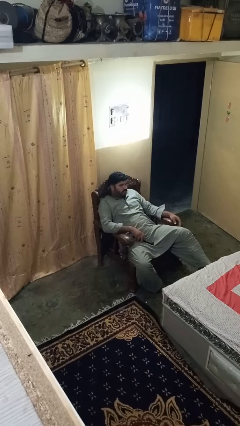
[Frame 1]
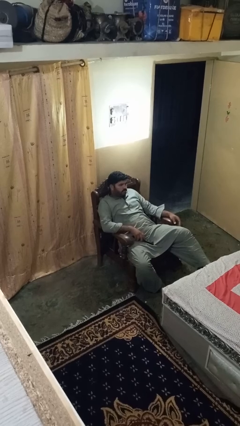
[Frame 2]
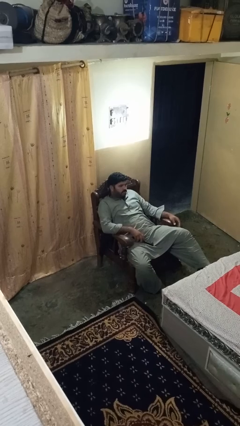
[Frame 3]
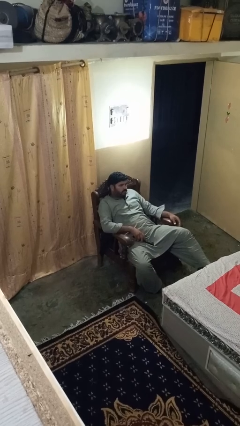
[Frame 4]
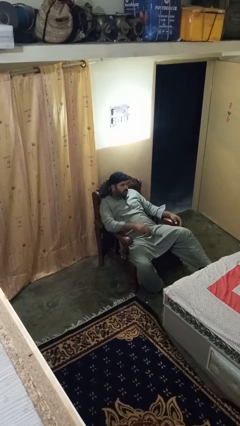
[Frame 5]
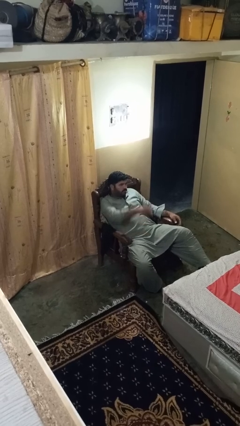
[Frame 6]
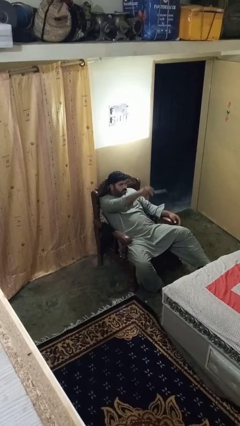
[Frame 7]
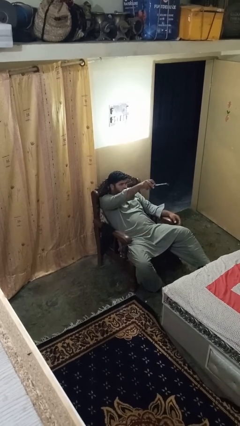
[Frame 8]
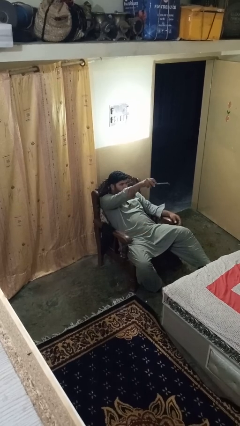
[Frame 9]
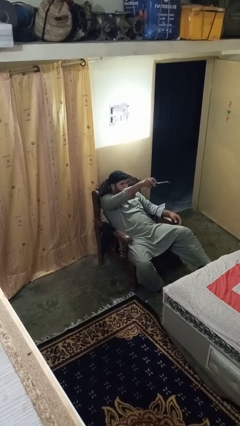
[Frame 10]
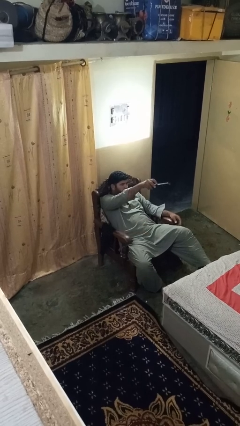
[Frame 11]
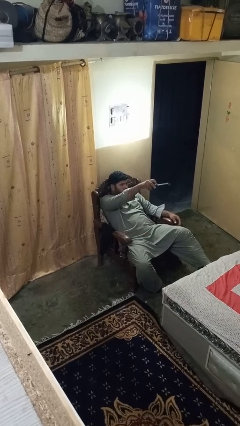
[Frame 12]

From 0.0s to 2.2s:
person uses television remote

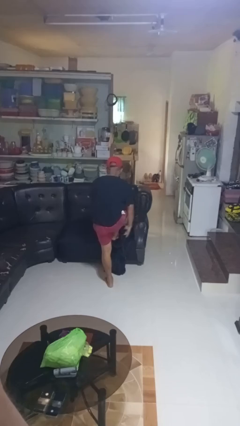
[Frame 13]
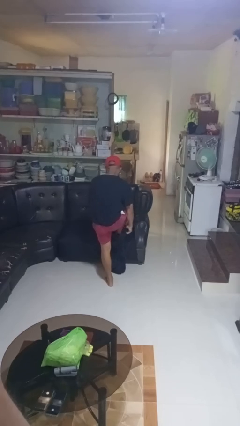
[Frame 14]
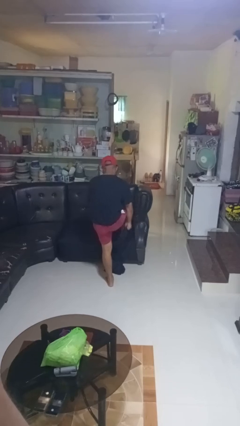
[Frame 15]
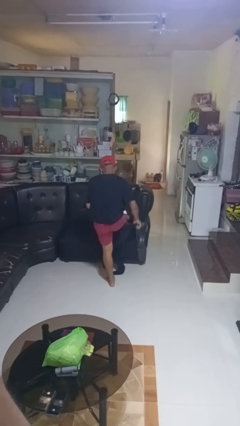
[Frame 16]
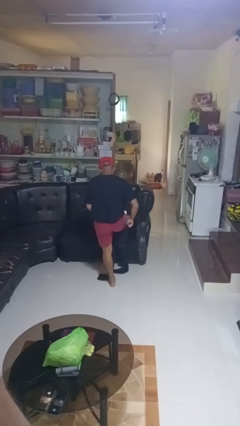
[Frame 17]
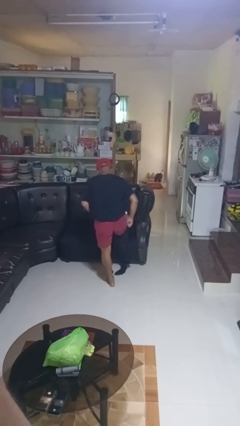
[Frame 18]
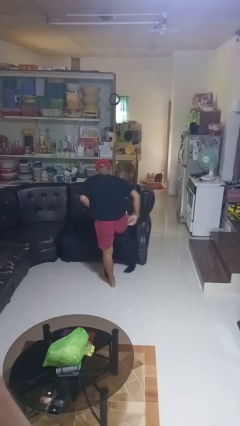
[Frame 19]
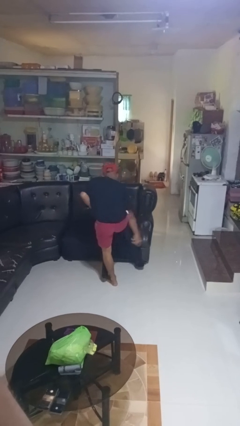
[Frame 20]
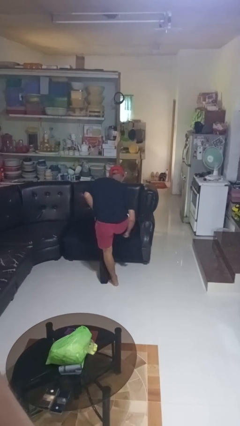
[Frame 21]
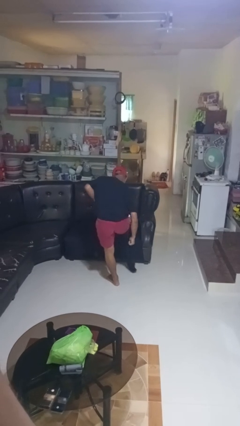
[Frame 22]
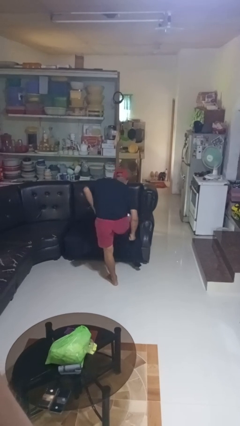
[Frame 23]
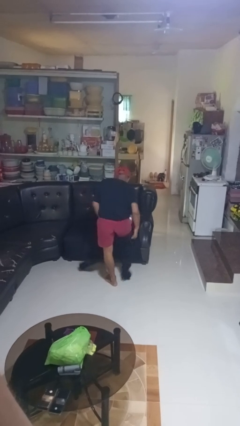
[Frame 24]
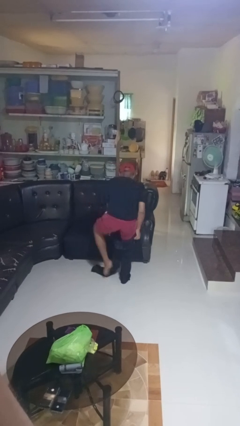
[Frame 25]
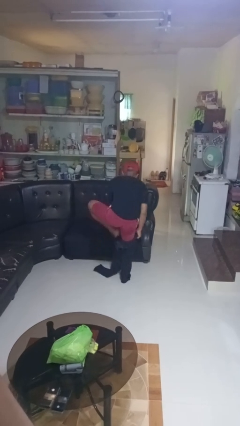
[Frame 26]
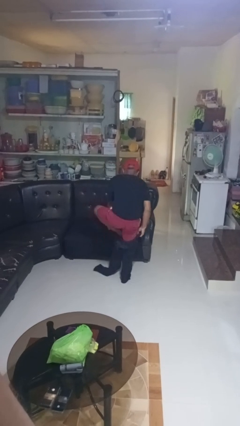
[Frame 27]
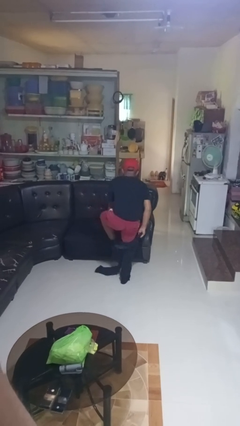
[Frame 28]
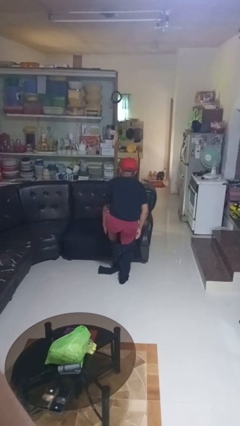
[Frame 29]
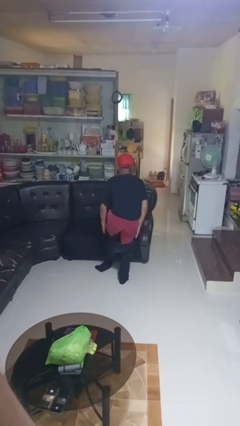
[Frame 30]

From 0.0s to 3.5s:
person puts on pants

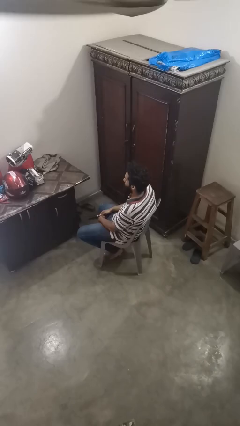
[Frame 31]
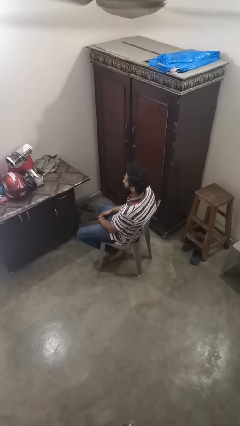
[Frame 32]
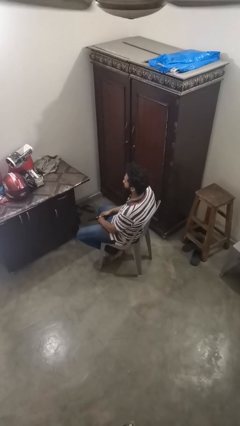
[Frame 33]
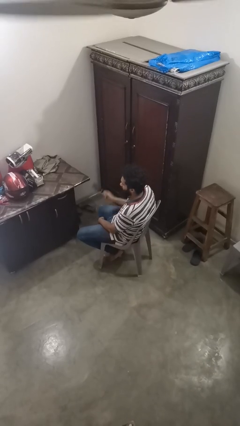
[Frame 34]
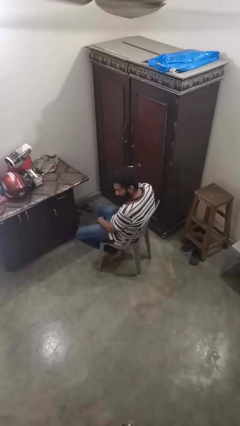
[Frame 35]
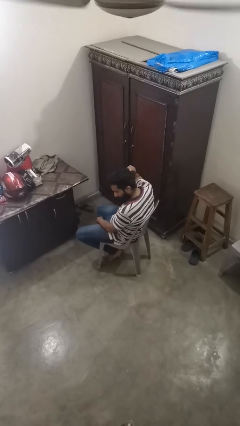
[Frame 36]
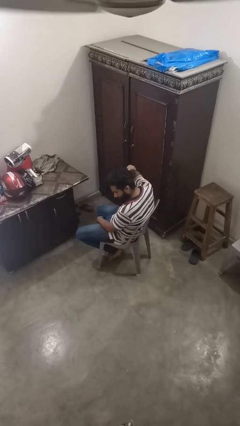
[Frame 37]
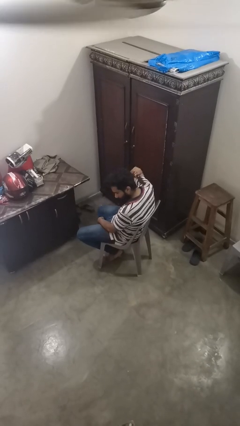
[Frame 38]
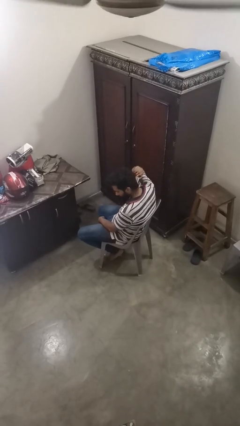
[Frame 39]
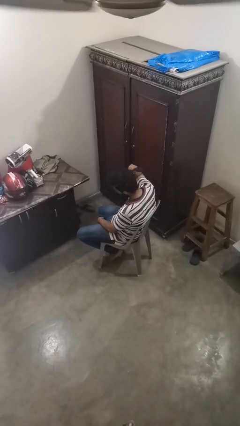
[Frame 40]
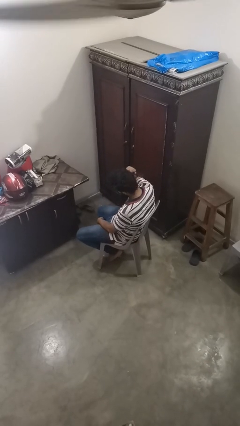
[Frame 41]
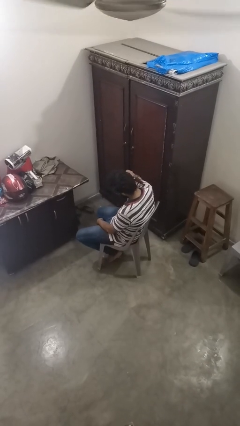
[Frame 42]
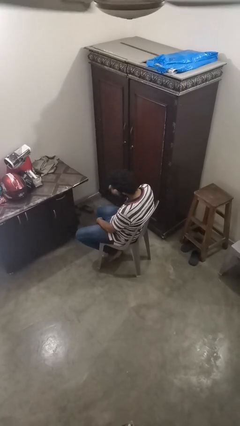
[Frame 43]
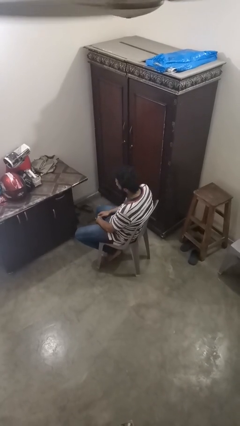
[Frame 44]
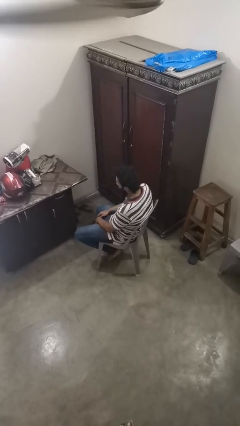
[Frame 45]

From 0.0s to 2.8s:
person brushes hair

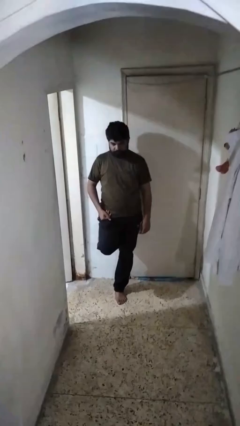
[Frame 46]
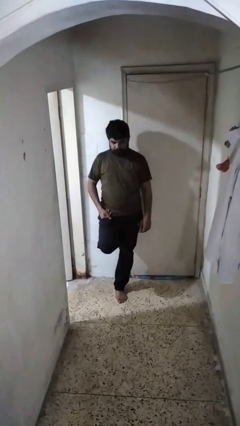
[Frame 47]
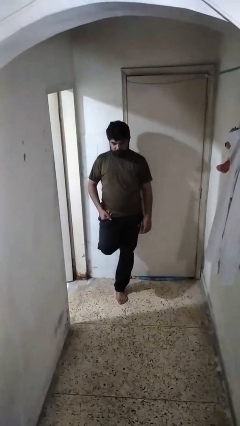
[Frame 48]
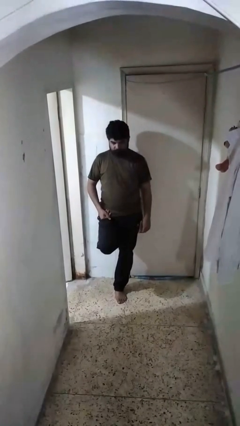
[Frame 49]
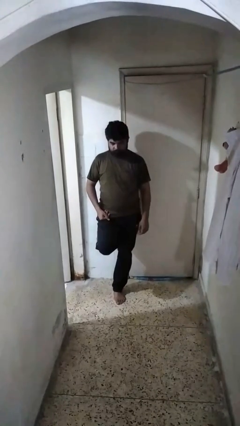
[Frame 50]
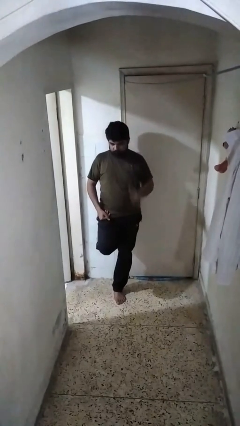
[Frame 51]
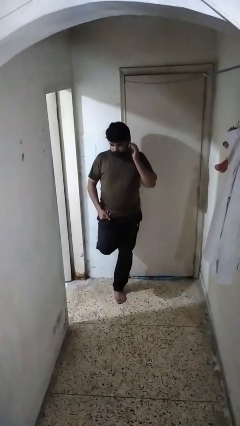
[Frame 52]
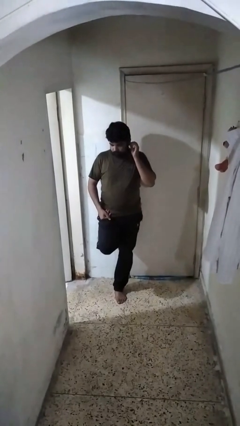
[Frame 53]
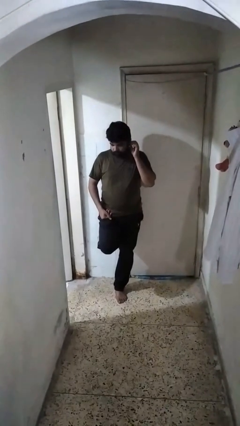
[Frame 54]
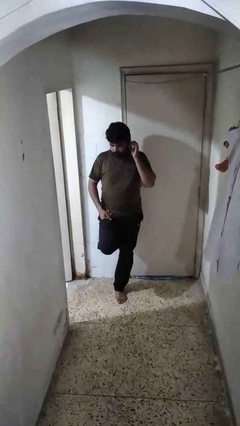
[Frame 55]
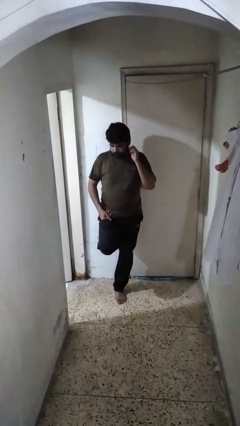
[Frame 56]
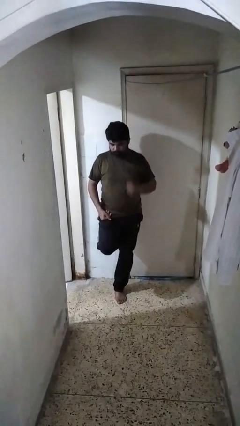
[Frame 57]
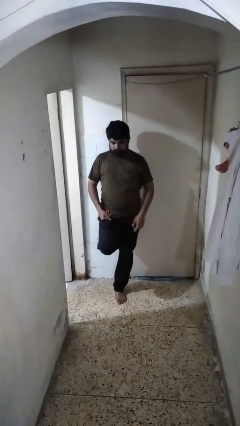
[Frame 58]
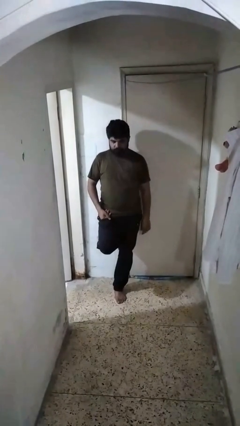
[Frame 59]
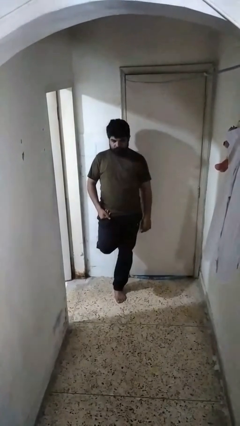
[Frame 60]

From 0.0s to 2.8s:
person touches earlobe

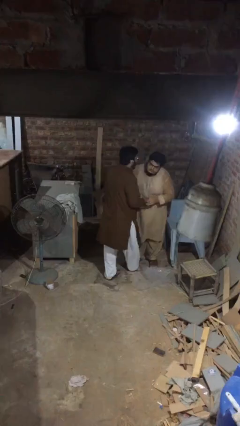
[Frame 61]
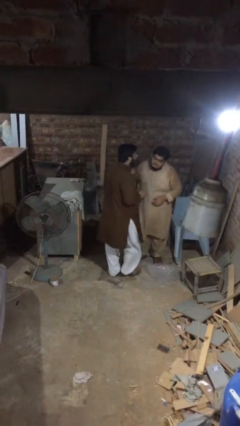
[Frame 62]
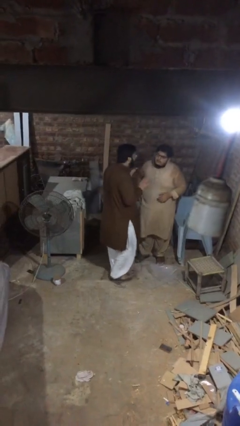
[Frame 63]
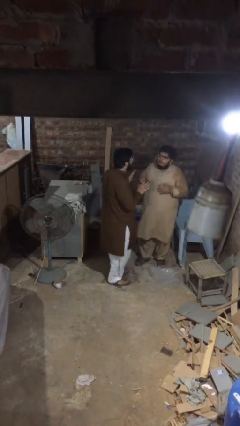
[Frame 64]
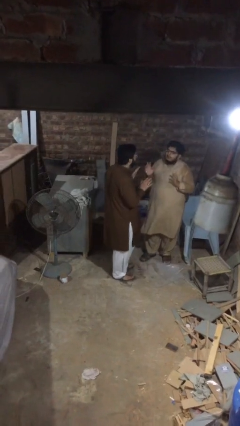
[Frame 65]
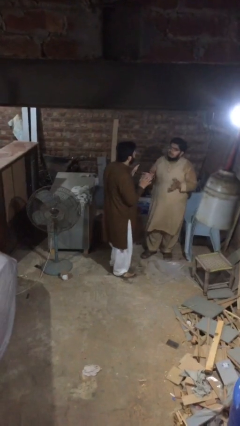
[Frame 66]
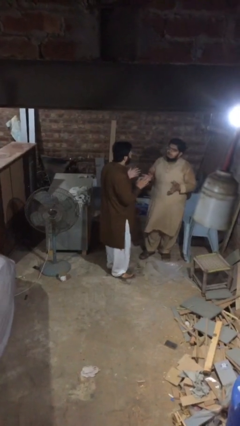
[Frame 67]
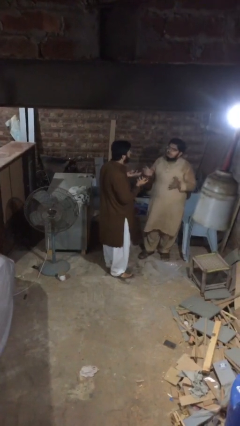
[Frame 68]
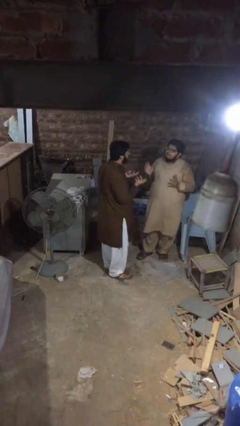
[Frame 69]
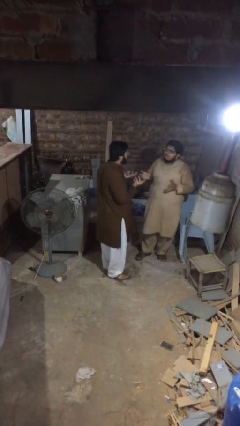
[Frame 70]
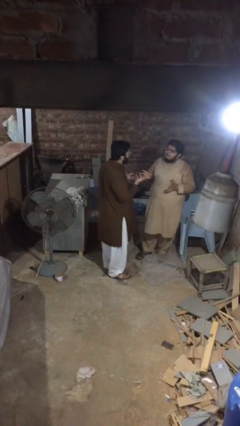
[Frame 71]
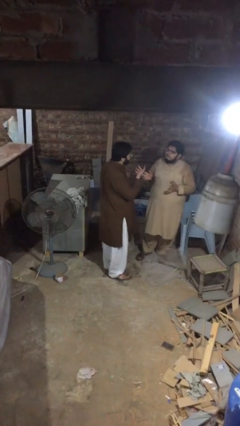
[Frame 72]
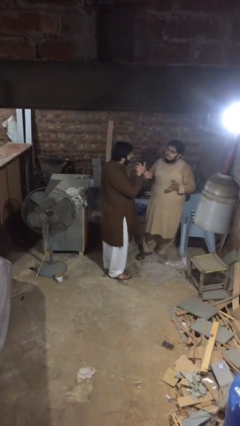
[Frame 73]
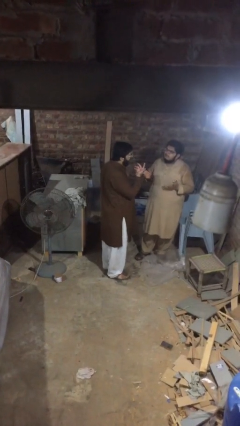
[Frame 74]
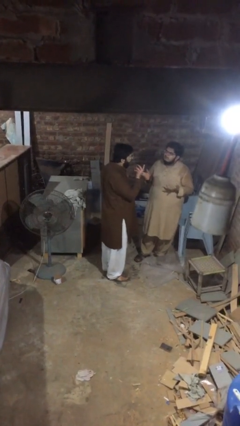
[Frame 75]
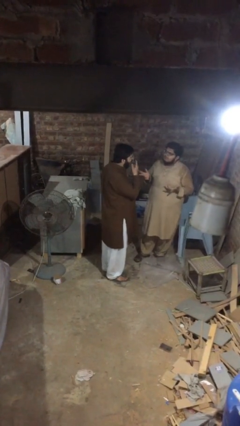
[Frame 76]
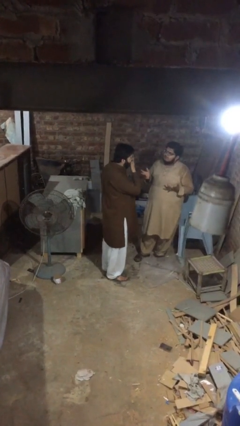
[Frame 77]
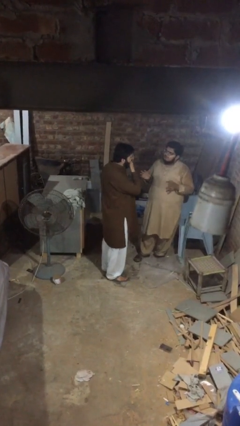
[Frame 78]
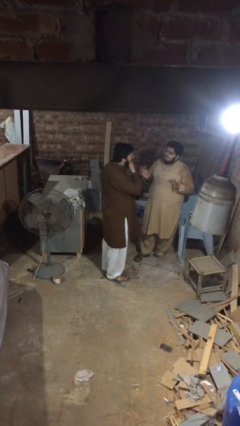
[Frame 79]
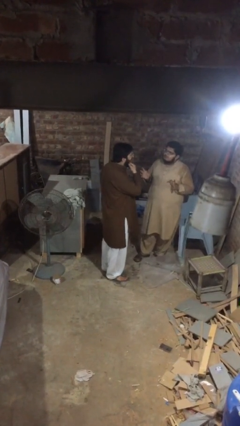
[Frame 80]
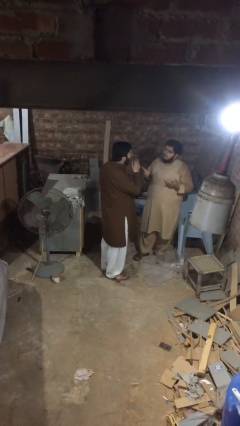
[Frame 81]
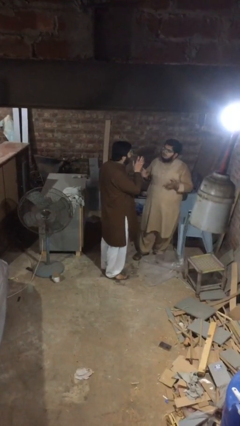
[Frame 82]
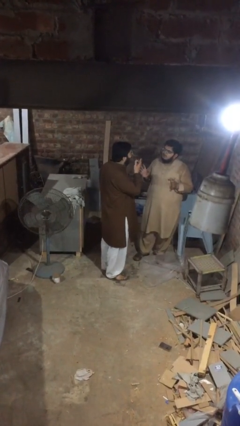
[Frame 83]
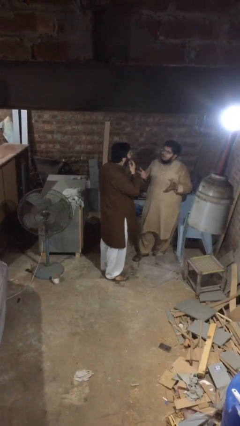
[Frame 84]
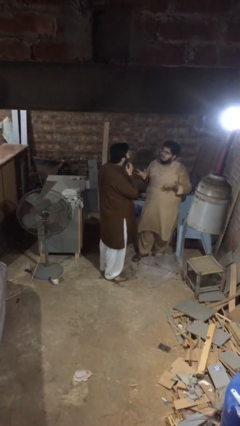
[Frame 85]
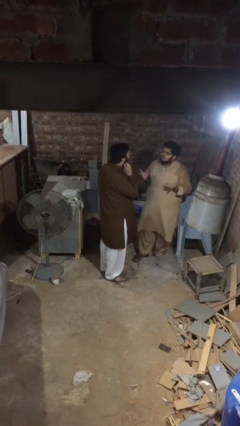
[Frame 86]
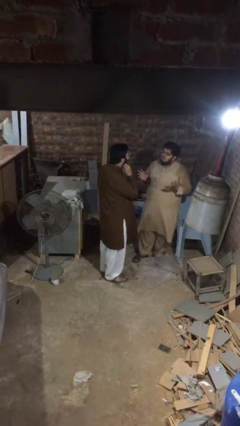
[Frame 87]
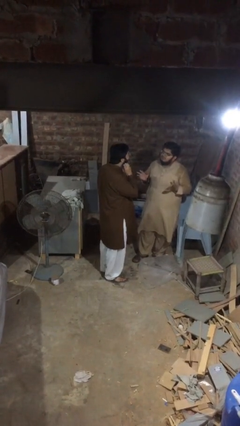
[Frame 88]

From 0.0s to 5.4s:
person talks to person

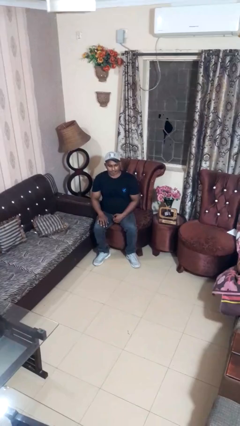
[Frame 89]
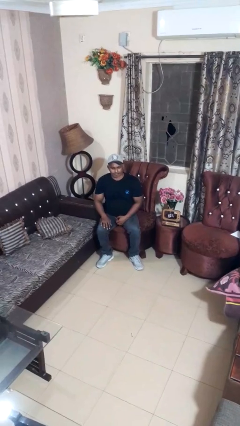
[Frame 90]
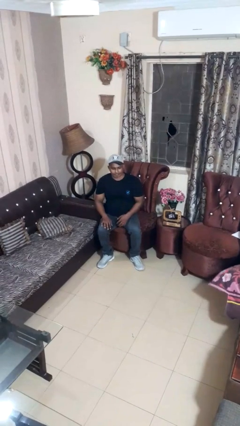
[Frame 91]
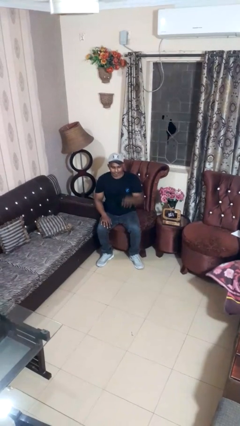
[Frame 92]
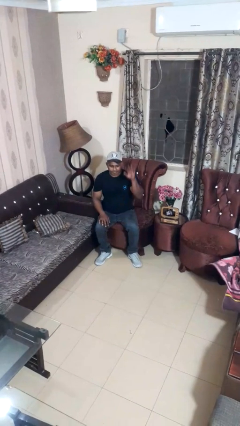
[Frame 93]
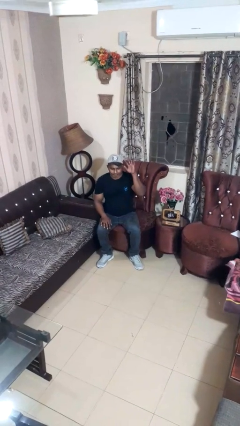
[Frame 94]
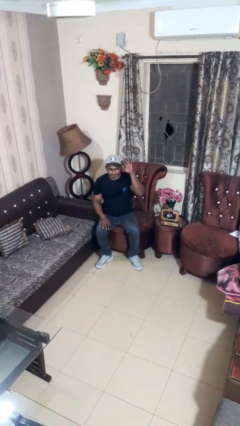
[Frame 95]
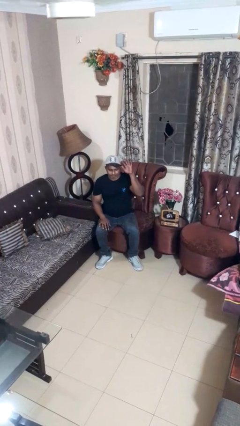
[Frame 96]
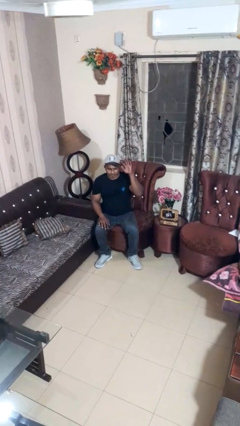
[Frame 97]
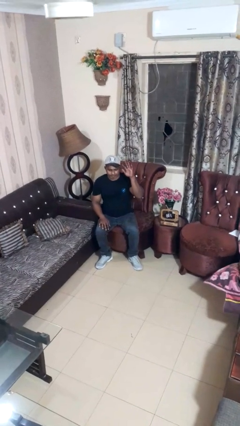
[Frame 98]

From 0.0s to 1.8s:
person gestures raise hand
